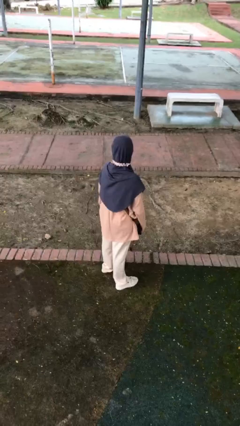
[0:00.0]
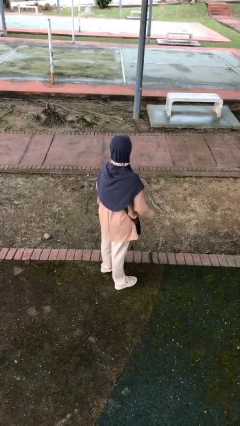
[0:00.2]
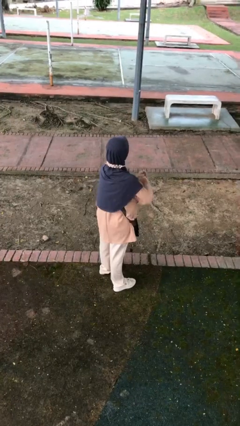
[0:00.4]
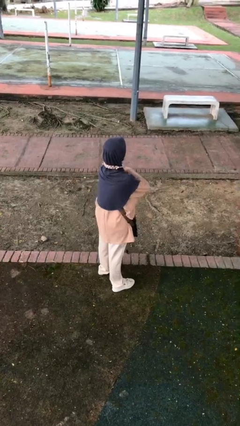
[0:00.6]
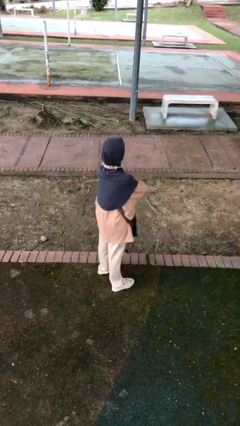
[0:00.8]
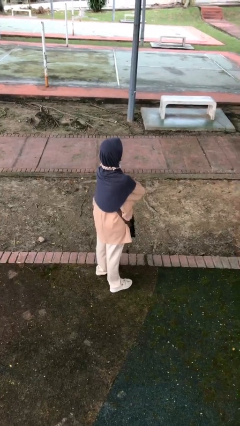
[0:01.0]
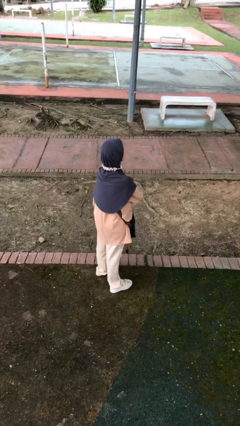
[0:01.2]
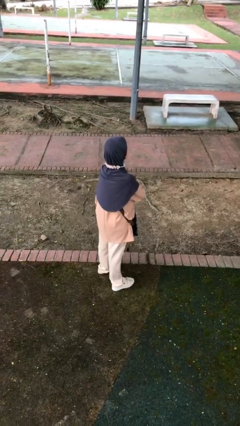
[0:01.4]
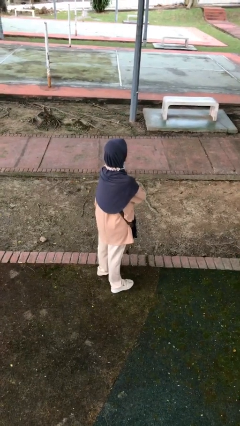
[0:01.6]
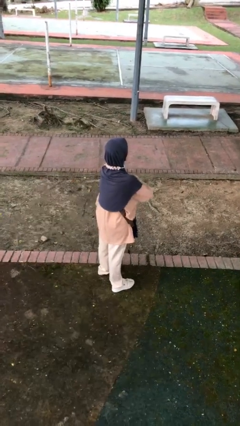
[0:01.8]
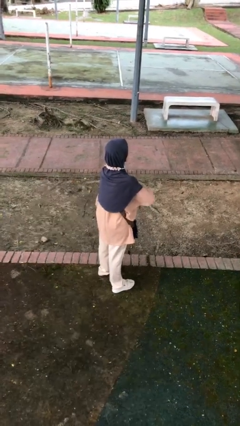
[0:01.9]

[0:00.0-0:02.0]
person crosses arms

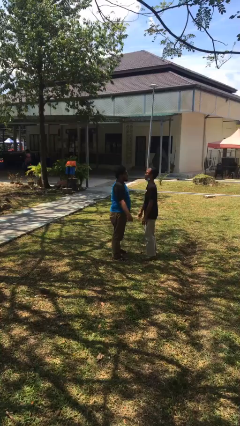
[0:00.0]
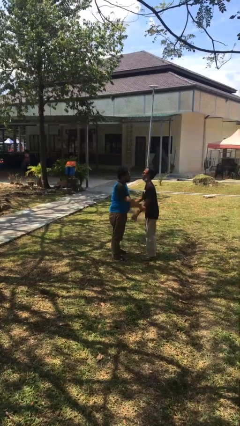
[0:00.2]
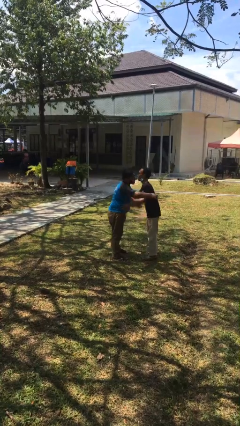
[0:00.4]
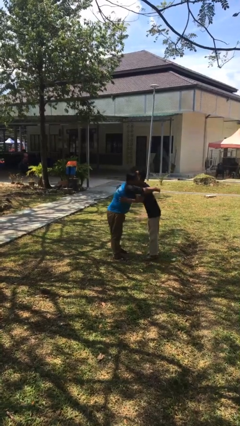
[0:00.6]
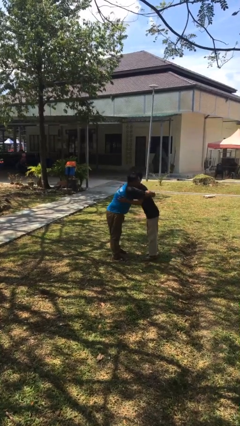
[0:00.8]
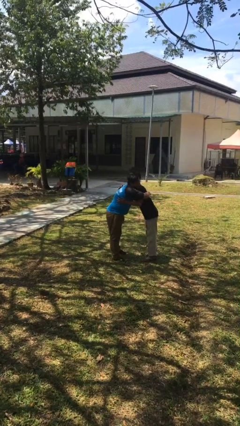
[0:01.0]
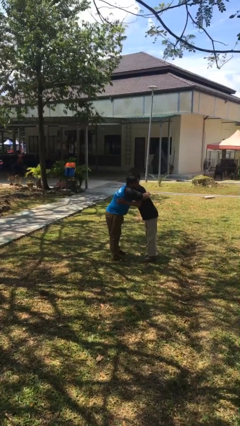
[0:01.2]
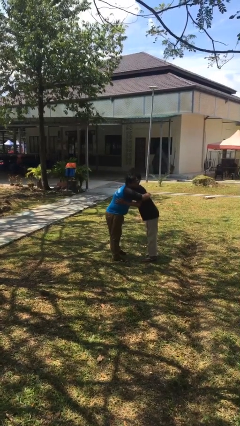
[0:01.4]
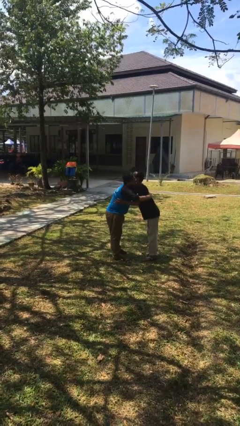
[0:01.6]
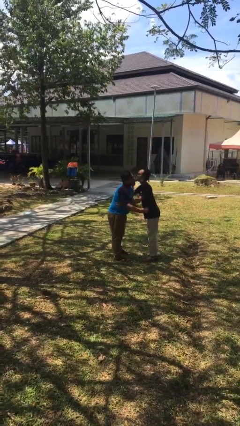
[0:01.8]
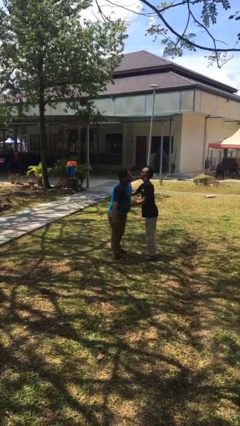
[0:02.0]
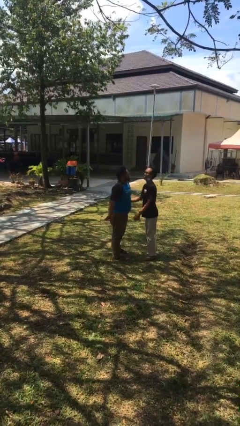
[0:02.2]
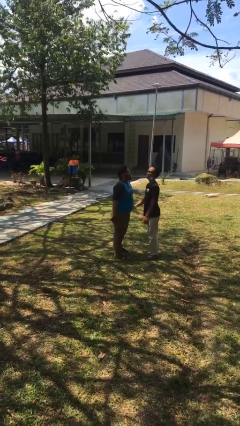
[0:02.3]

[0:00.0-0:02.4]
person embraces person

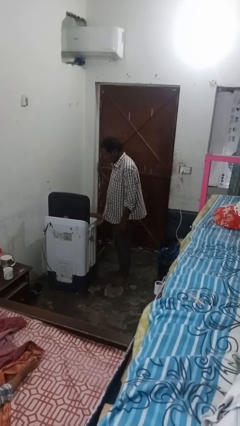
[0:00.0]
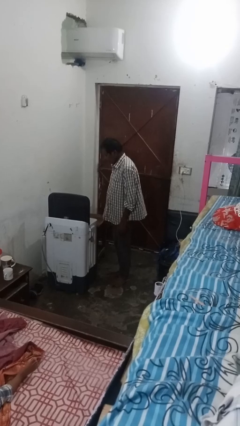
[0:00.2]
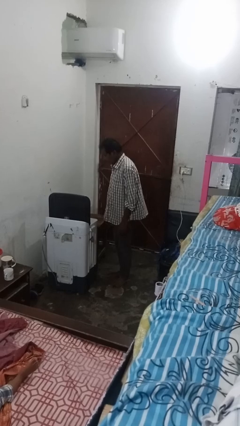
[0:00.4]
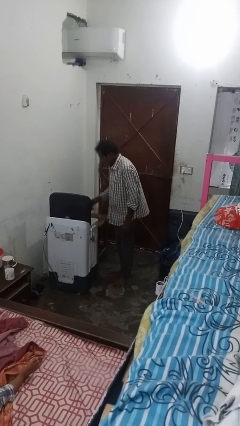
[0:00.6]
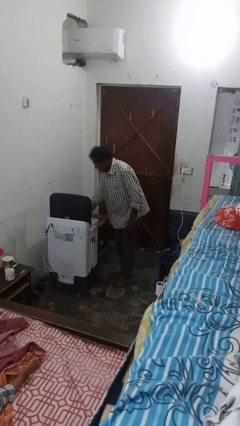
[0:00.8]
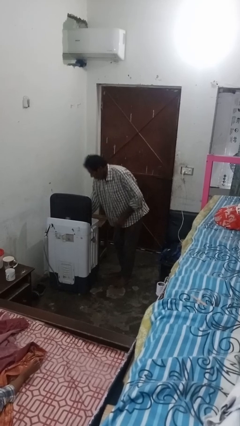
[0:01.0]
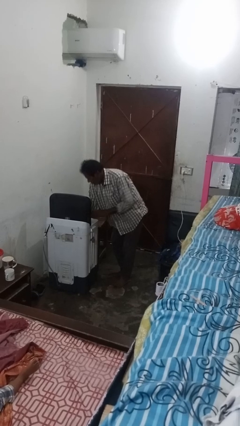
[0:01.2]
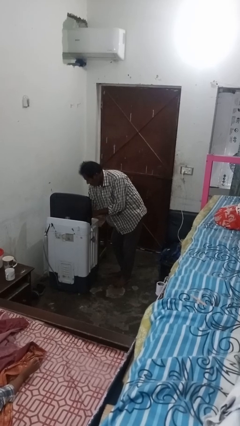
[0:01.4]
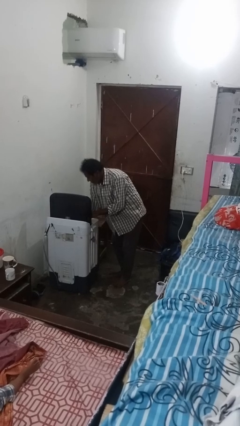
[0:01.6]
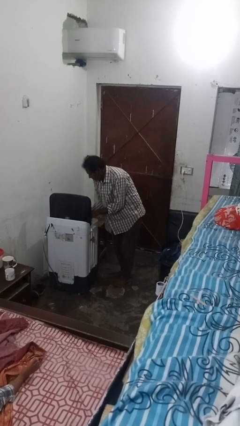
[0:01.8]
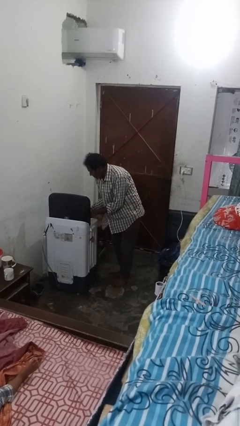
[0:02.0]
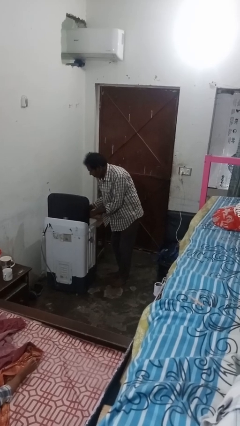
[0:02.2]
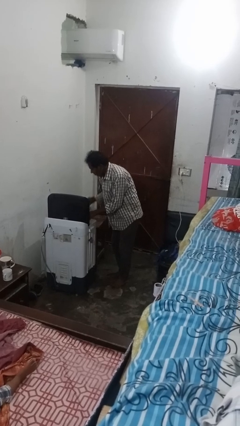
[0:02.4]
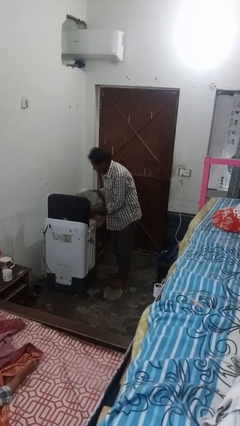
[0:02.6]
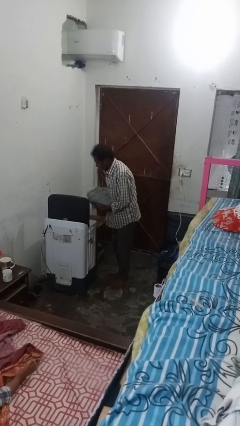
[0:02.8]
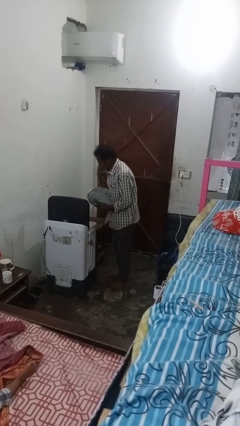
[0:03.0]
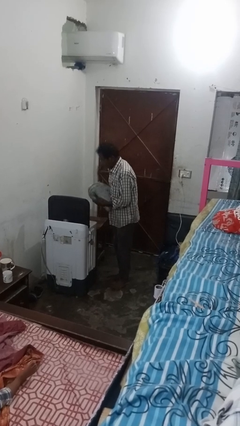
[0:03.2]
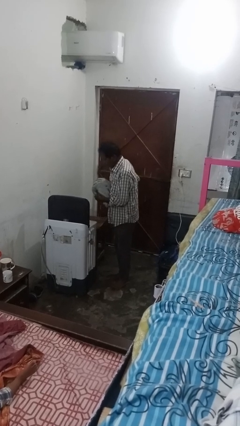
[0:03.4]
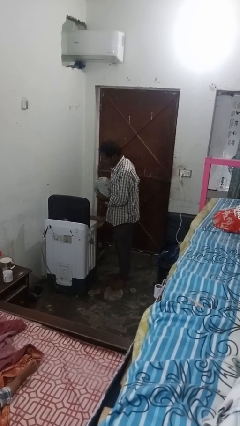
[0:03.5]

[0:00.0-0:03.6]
person unloads dryer

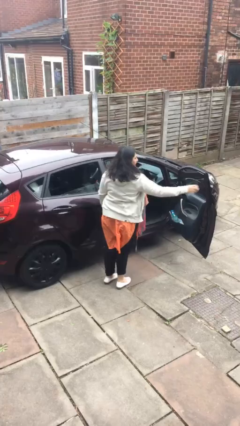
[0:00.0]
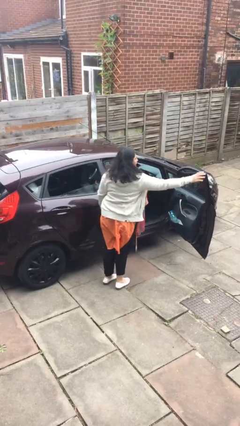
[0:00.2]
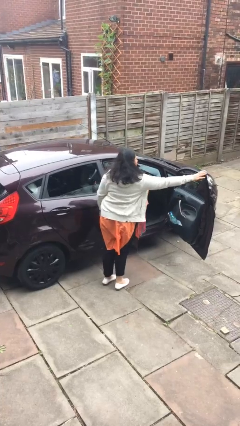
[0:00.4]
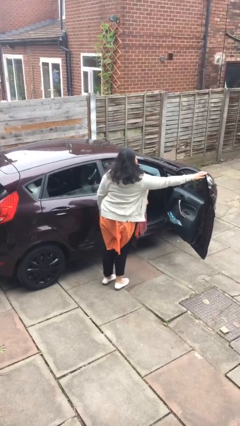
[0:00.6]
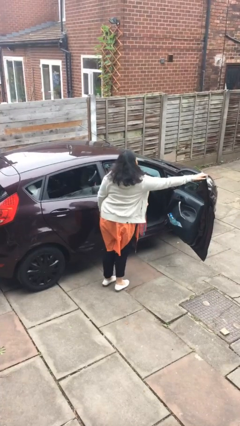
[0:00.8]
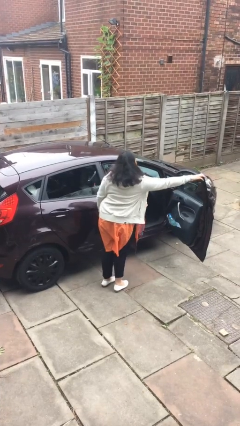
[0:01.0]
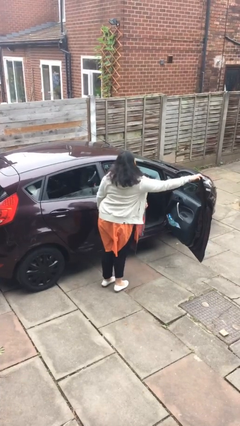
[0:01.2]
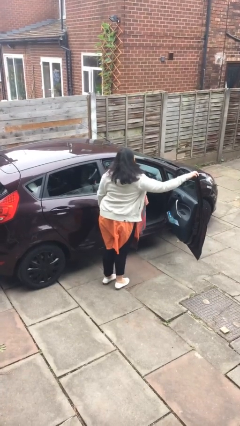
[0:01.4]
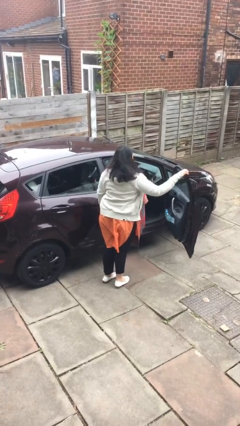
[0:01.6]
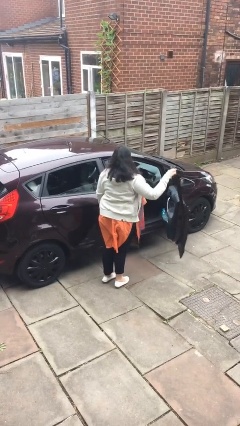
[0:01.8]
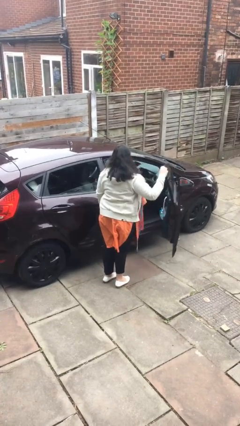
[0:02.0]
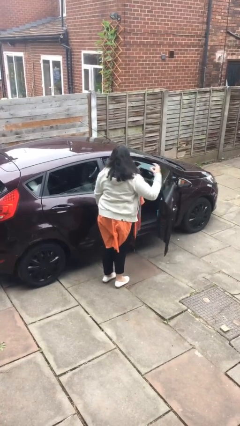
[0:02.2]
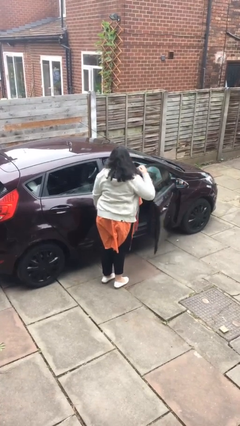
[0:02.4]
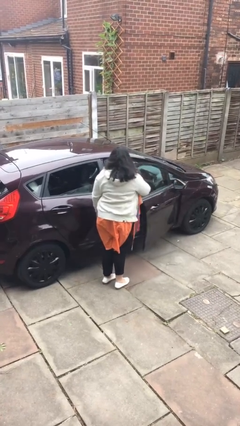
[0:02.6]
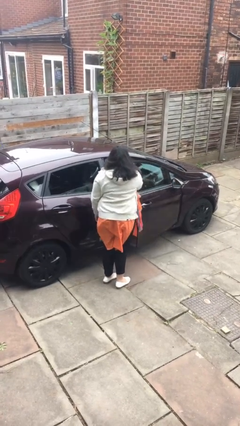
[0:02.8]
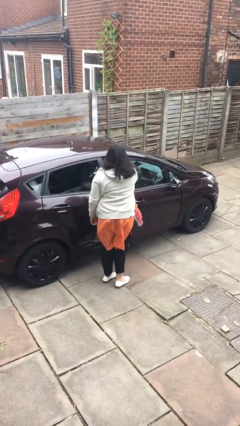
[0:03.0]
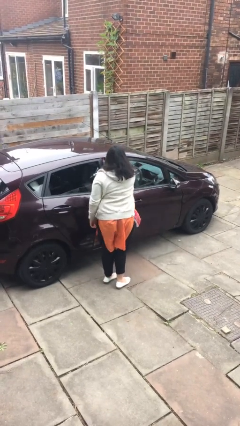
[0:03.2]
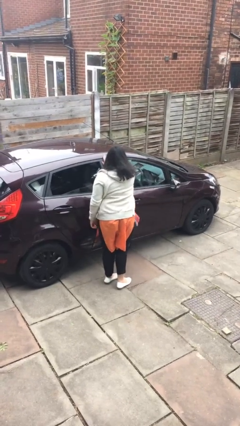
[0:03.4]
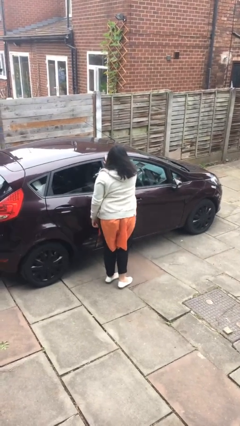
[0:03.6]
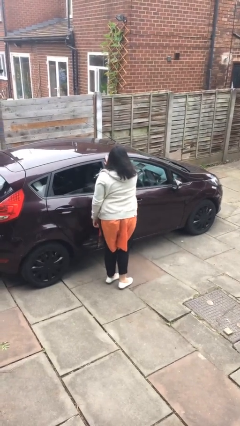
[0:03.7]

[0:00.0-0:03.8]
person closes car door

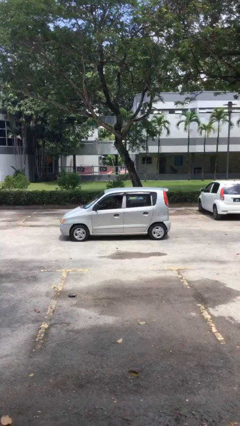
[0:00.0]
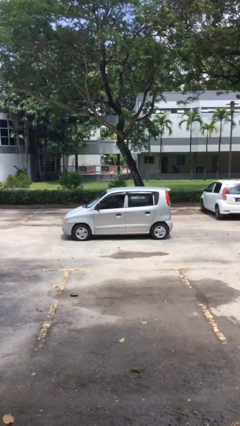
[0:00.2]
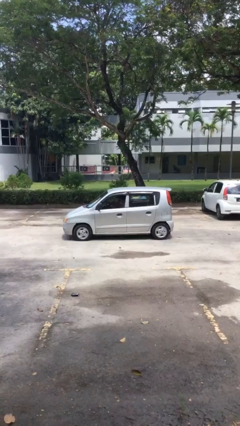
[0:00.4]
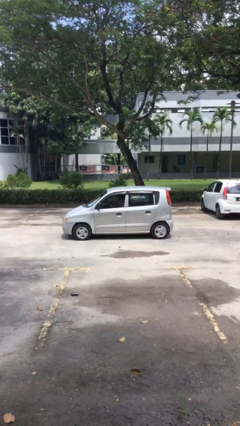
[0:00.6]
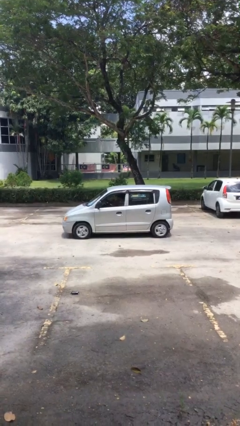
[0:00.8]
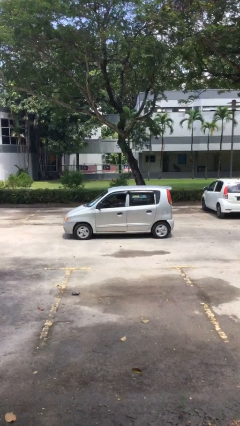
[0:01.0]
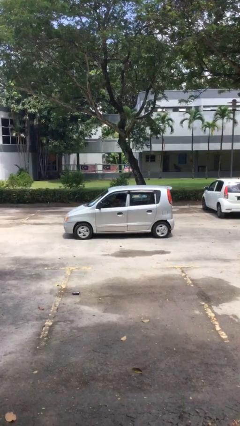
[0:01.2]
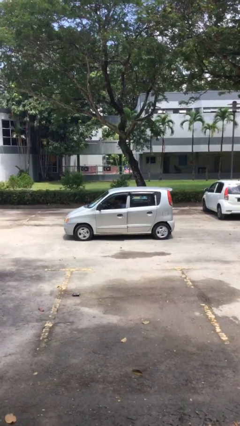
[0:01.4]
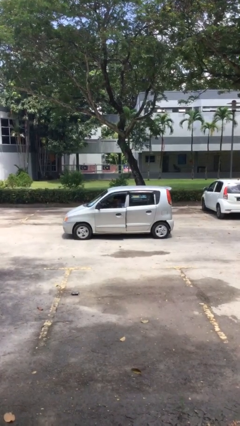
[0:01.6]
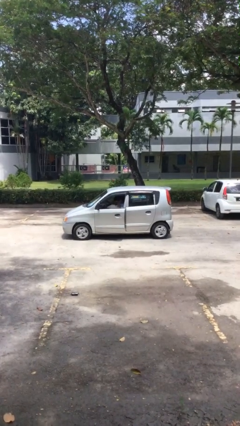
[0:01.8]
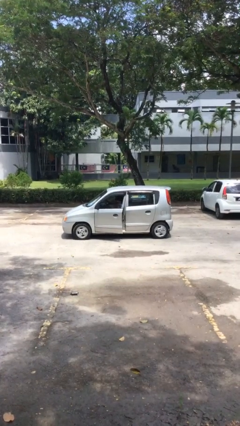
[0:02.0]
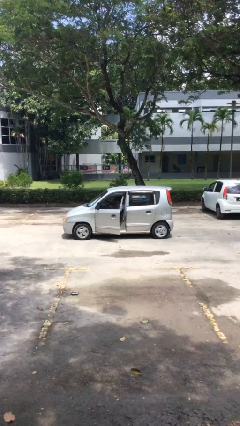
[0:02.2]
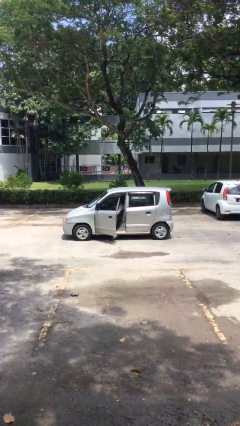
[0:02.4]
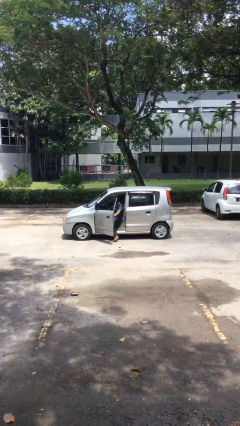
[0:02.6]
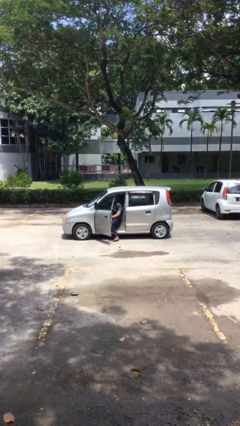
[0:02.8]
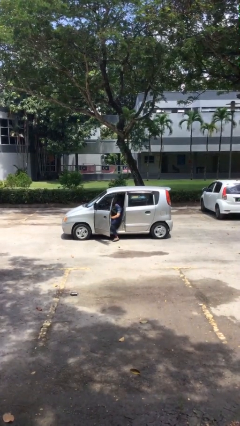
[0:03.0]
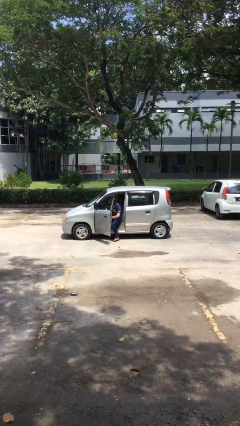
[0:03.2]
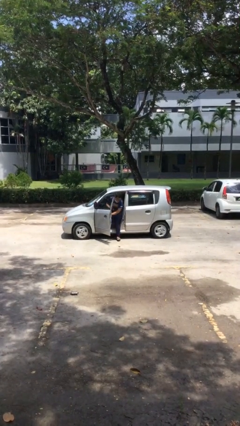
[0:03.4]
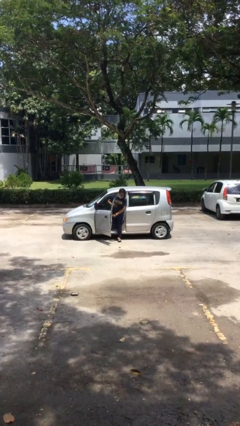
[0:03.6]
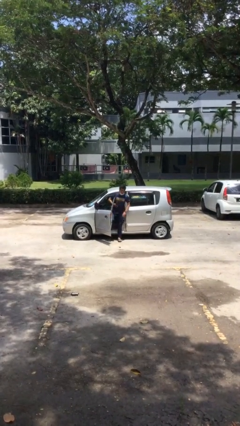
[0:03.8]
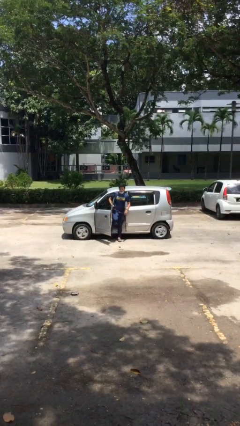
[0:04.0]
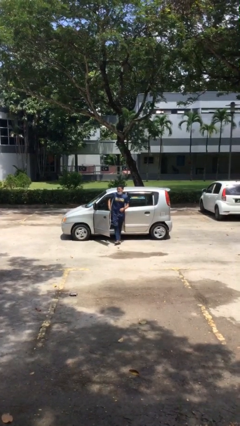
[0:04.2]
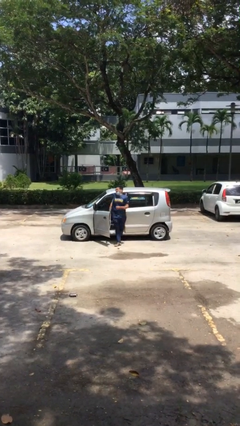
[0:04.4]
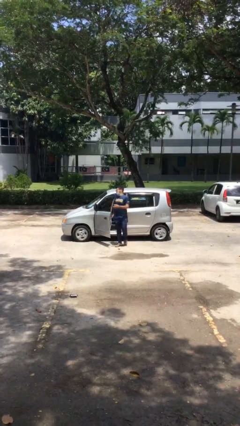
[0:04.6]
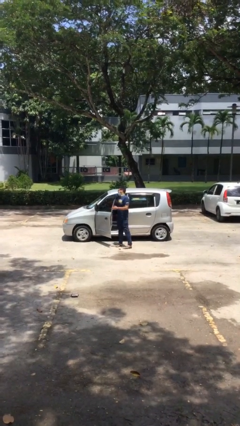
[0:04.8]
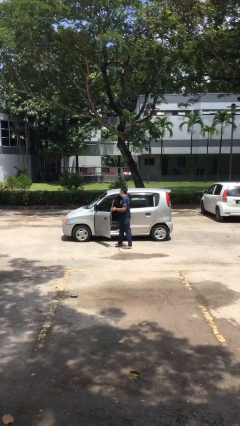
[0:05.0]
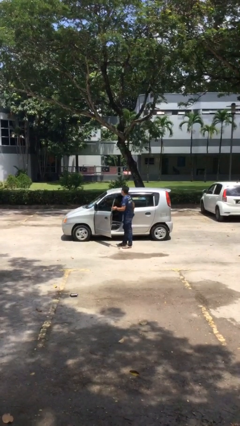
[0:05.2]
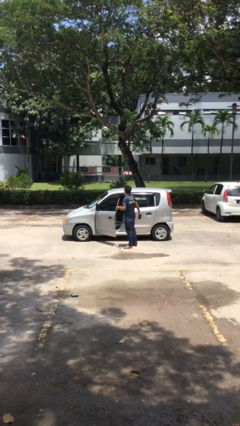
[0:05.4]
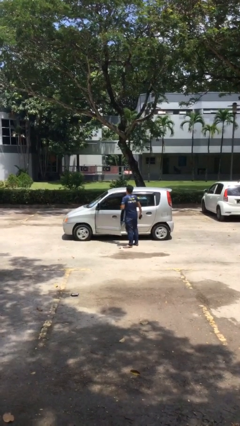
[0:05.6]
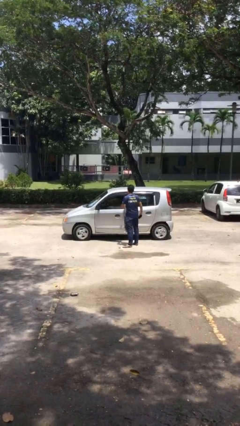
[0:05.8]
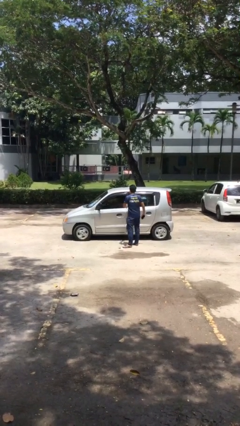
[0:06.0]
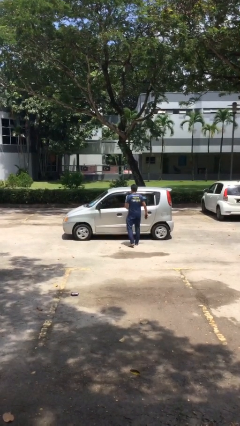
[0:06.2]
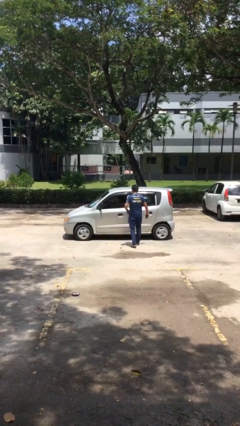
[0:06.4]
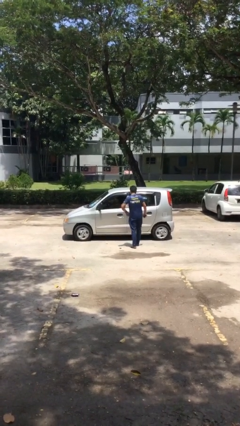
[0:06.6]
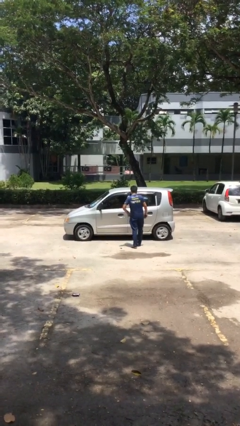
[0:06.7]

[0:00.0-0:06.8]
car drops off person
